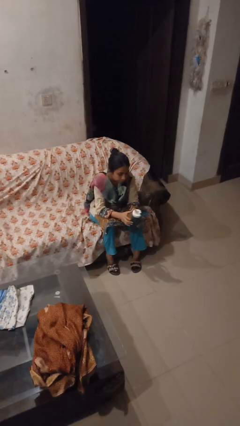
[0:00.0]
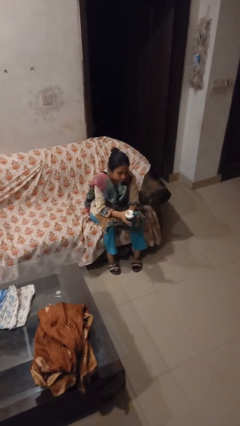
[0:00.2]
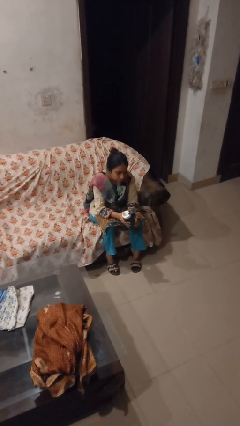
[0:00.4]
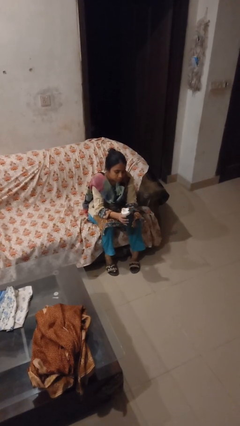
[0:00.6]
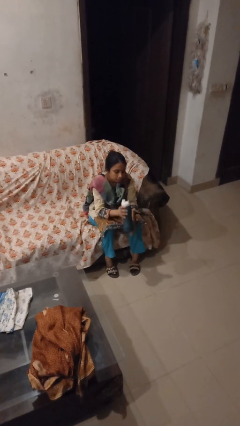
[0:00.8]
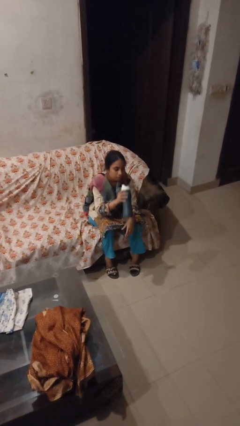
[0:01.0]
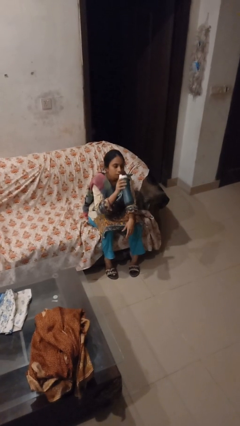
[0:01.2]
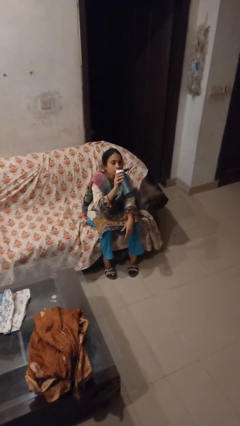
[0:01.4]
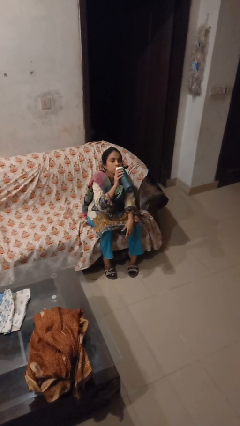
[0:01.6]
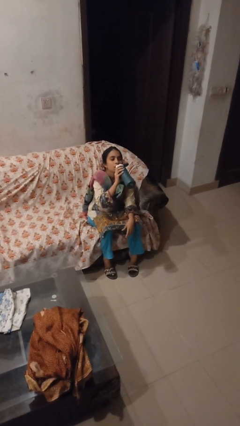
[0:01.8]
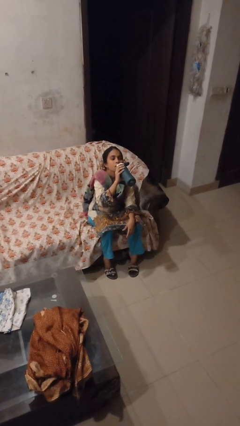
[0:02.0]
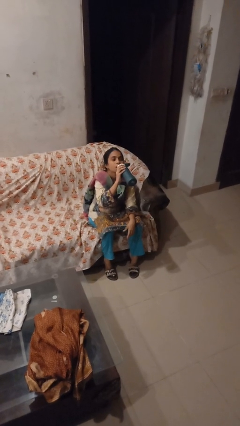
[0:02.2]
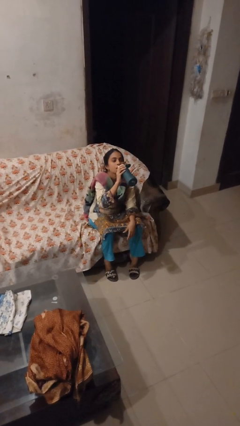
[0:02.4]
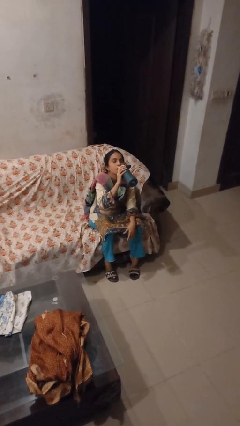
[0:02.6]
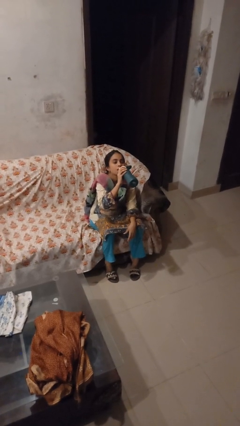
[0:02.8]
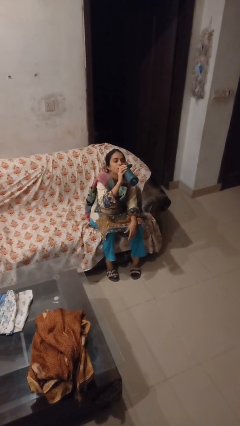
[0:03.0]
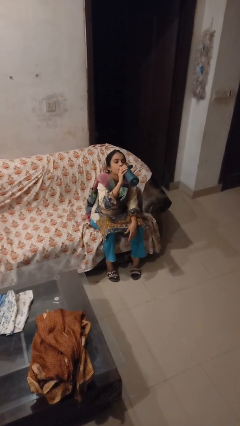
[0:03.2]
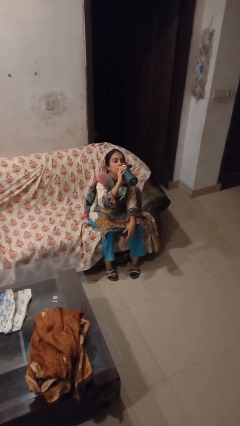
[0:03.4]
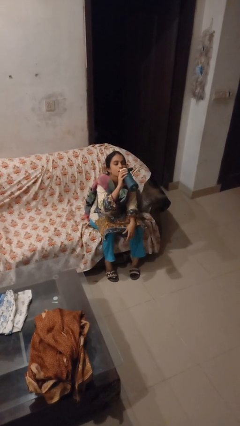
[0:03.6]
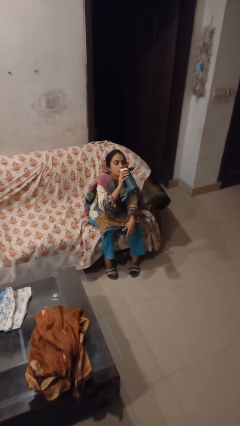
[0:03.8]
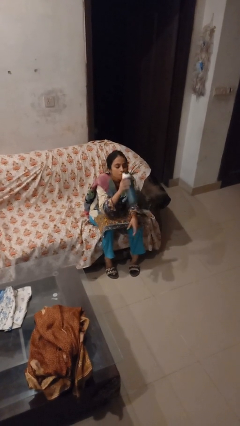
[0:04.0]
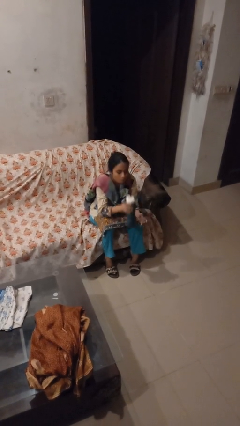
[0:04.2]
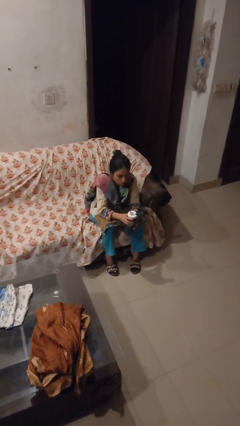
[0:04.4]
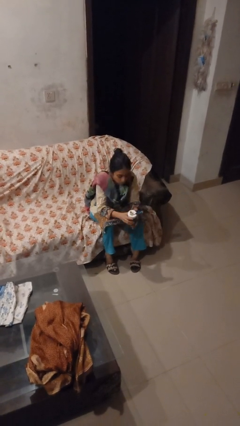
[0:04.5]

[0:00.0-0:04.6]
person drinks from bottle

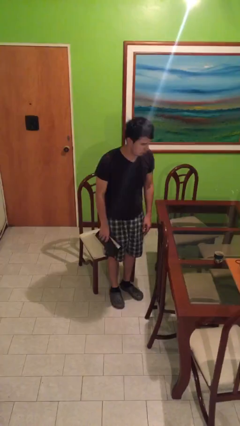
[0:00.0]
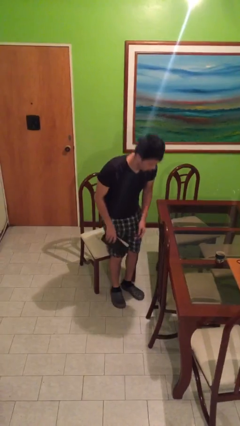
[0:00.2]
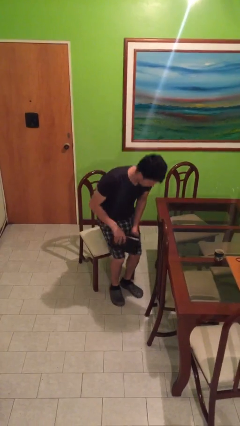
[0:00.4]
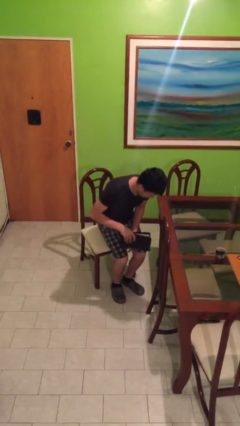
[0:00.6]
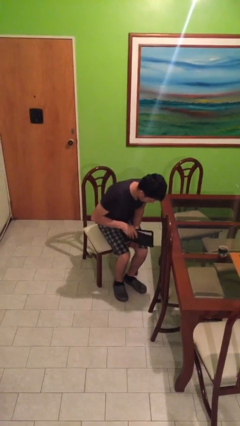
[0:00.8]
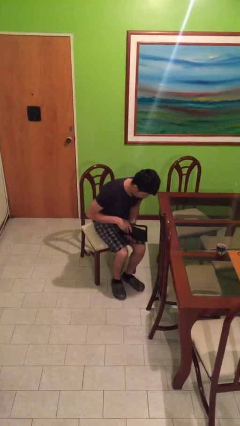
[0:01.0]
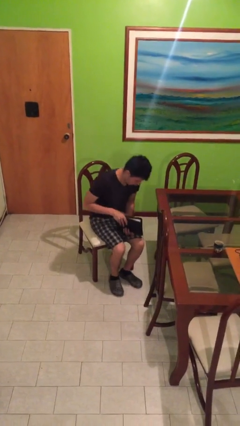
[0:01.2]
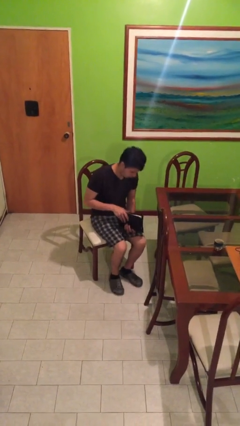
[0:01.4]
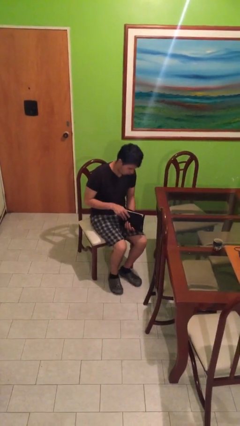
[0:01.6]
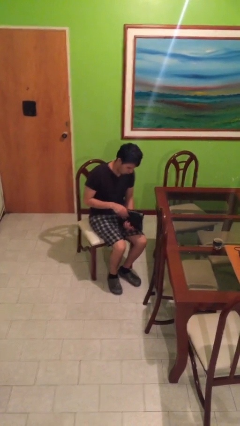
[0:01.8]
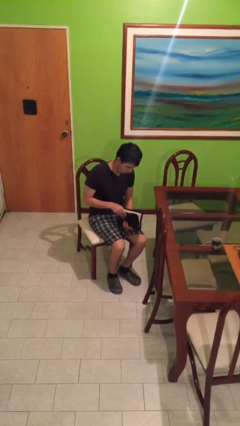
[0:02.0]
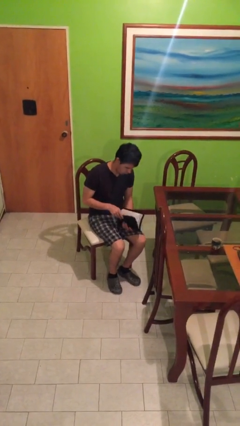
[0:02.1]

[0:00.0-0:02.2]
person sits down

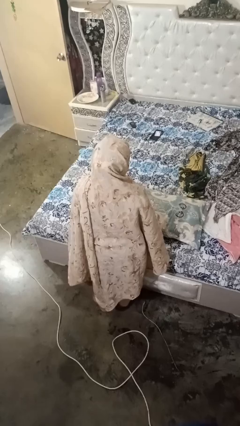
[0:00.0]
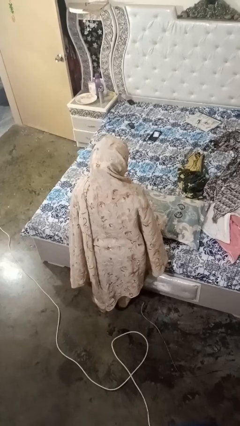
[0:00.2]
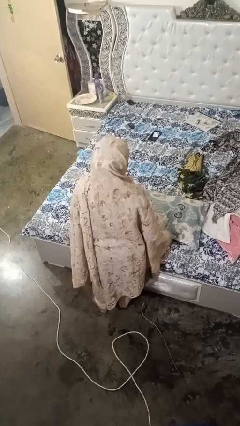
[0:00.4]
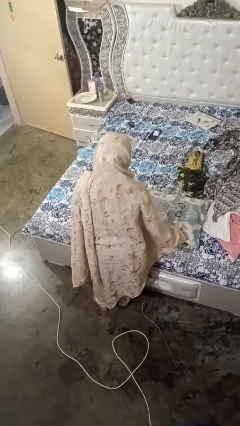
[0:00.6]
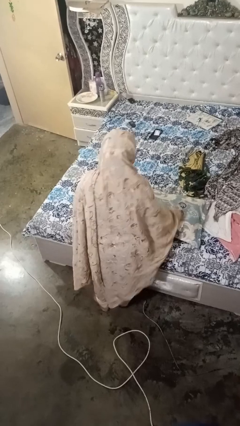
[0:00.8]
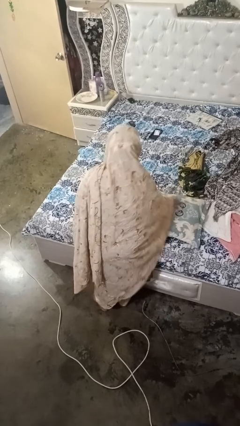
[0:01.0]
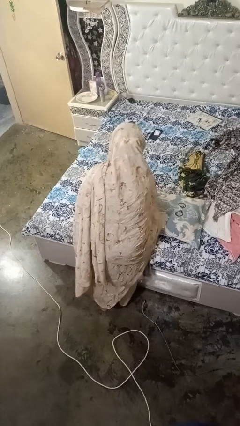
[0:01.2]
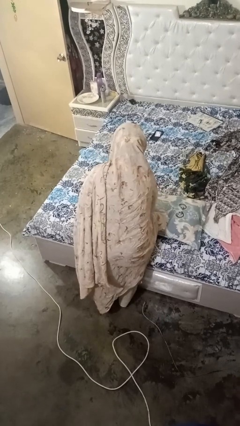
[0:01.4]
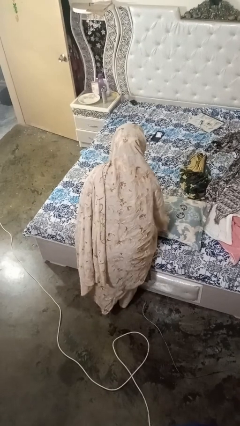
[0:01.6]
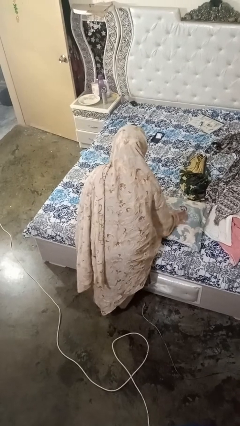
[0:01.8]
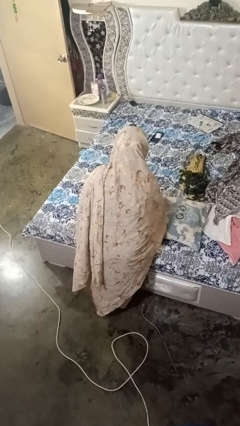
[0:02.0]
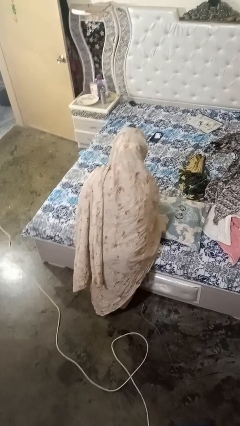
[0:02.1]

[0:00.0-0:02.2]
person waves hand over object

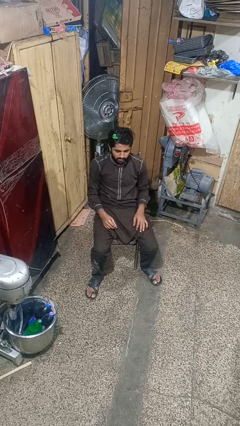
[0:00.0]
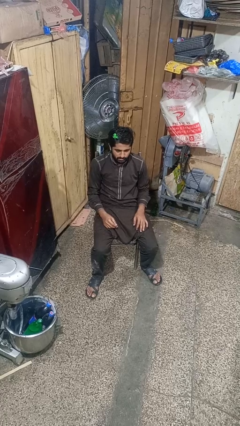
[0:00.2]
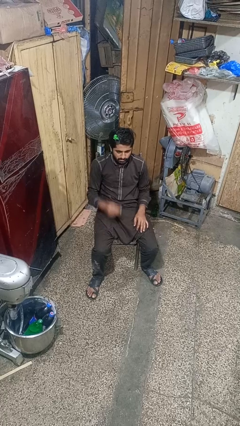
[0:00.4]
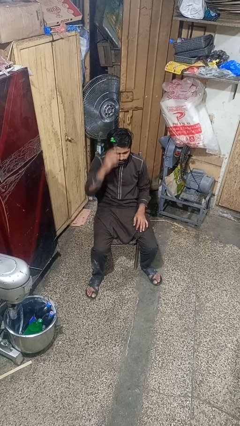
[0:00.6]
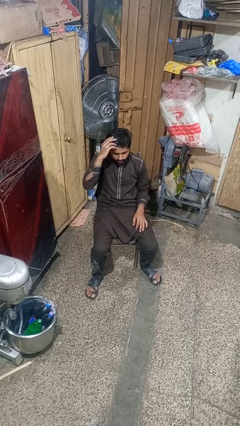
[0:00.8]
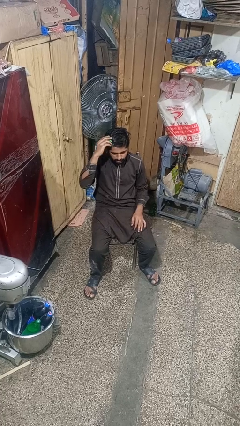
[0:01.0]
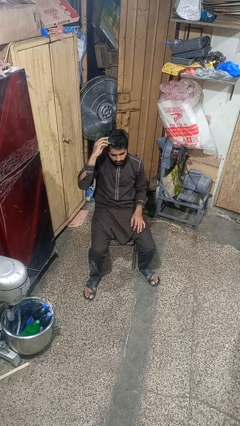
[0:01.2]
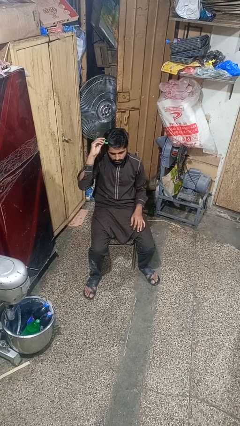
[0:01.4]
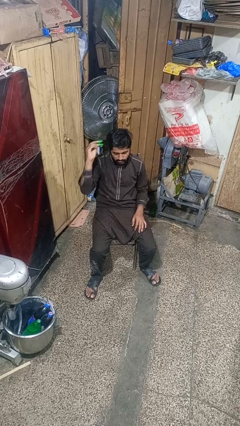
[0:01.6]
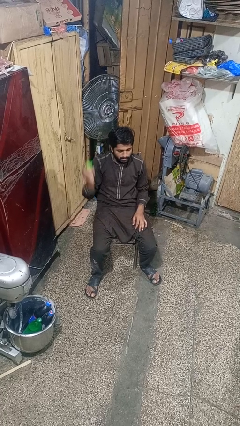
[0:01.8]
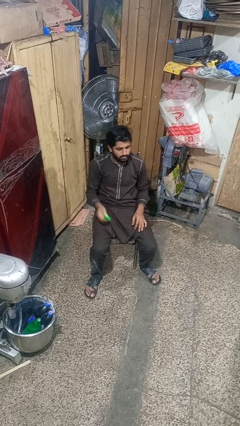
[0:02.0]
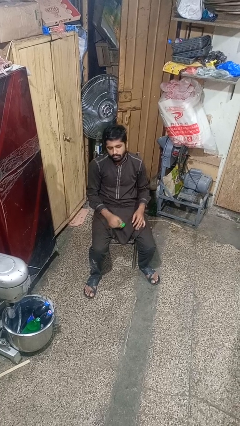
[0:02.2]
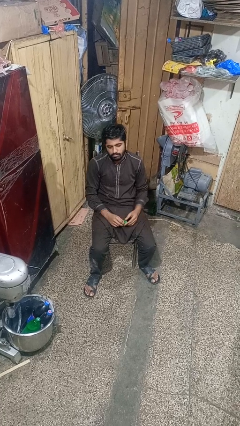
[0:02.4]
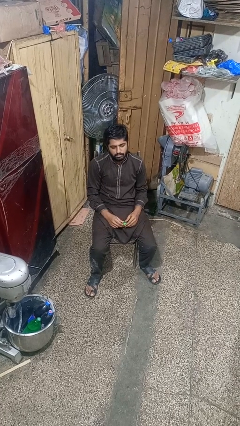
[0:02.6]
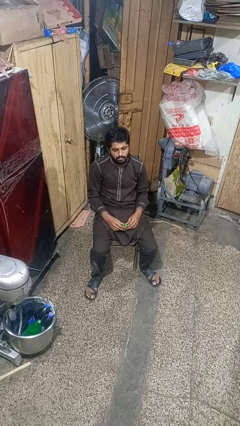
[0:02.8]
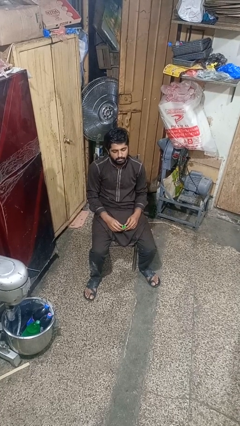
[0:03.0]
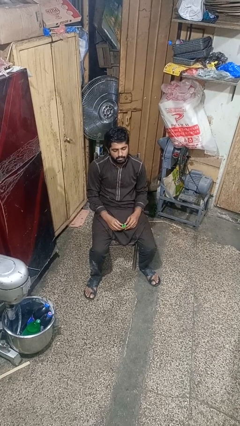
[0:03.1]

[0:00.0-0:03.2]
person takes off hairtie

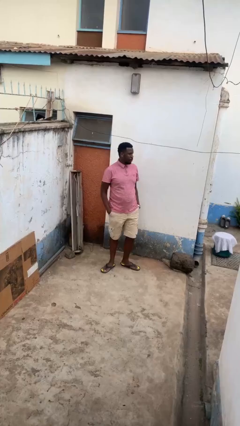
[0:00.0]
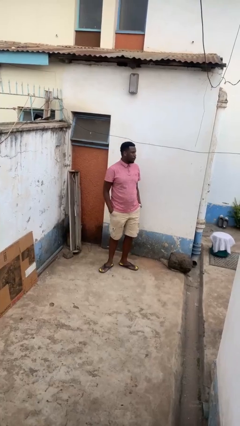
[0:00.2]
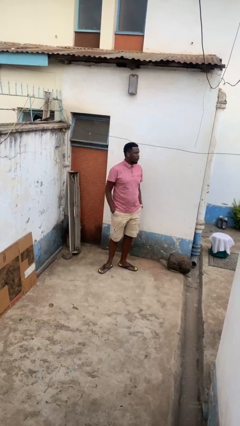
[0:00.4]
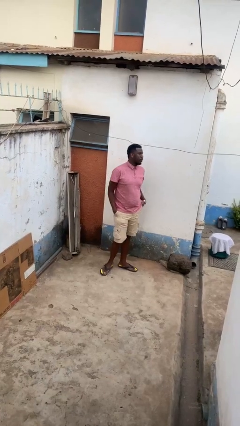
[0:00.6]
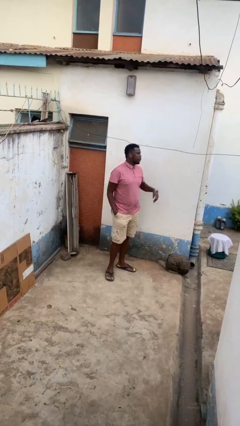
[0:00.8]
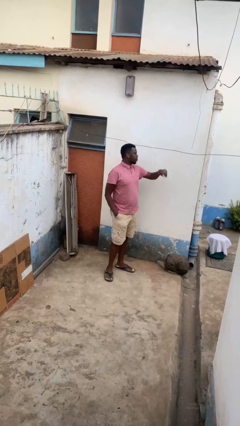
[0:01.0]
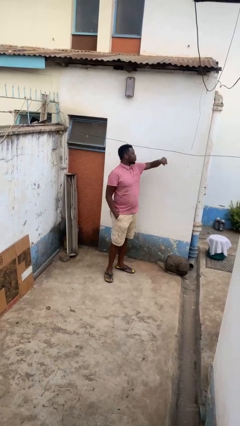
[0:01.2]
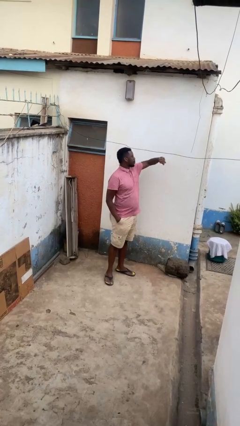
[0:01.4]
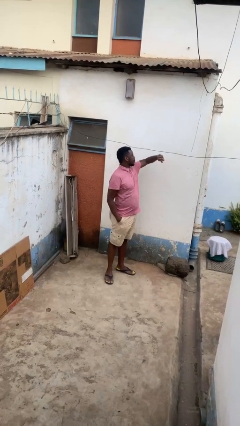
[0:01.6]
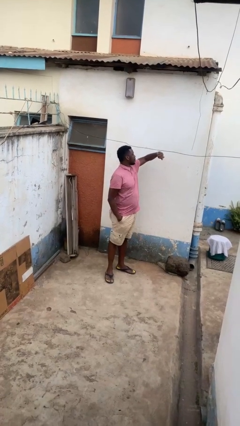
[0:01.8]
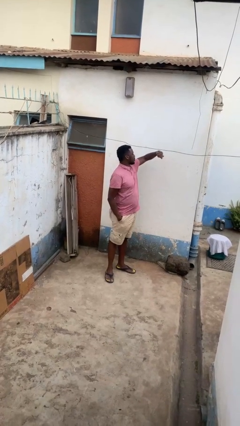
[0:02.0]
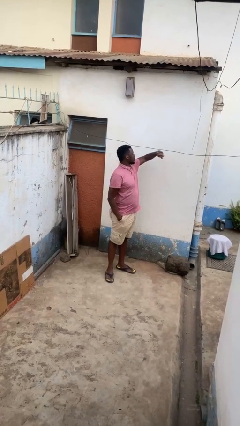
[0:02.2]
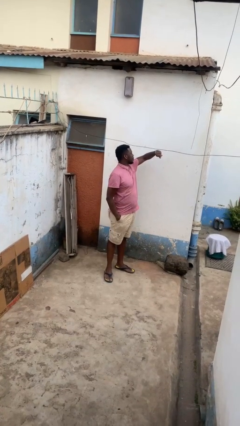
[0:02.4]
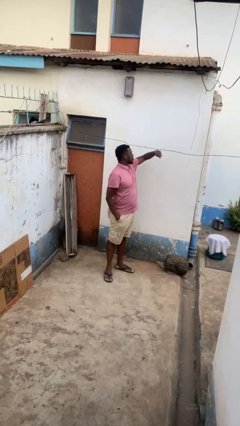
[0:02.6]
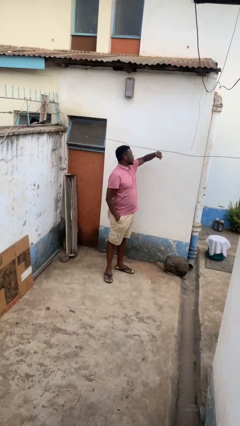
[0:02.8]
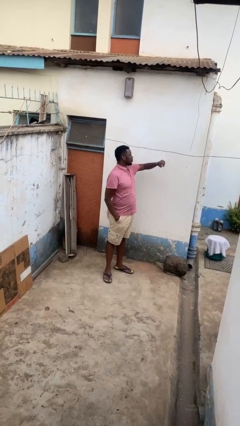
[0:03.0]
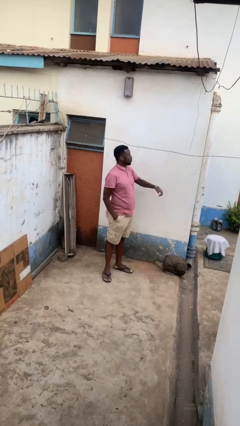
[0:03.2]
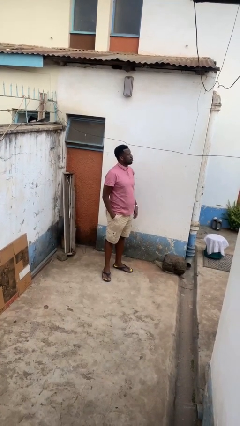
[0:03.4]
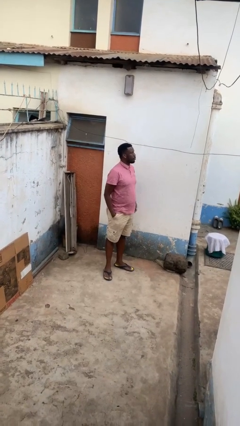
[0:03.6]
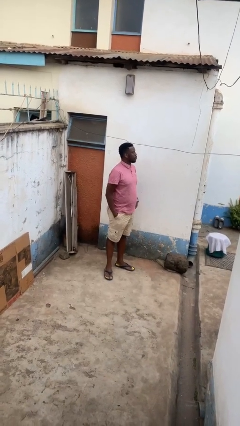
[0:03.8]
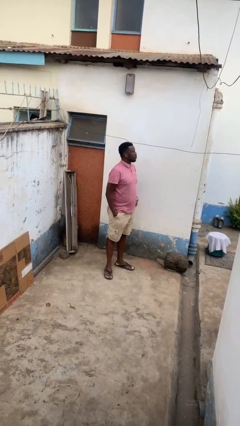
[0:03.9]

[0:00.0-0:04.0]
person looks at wristwatch

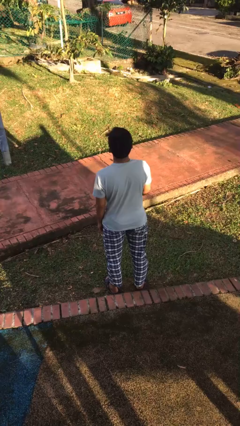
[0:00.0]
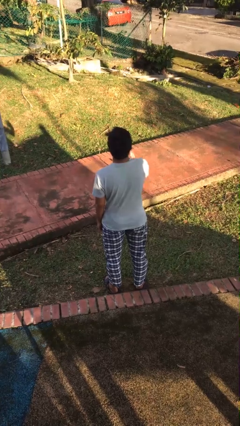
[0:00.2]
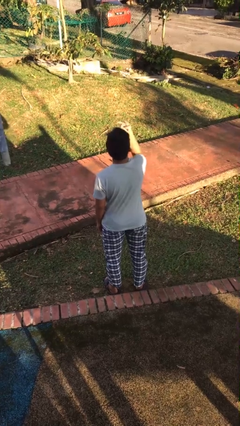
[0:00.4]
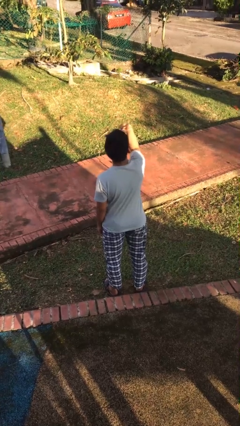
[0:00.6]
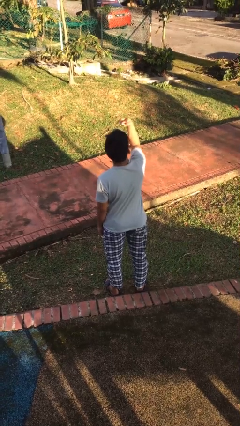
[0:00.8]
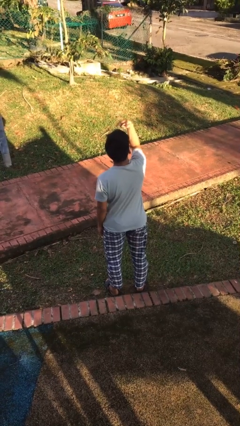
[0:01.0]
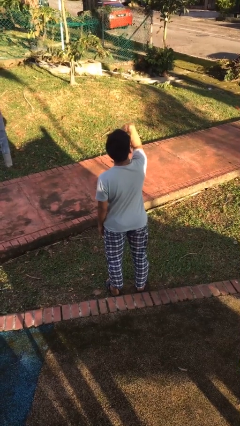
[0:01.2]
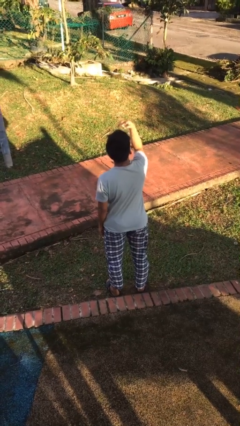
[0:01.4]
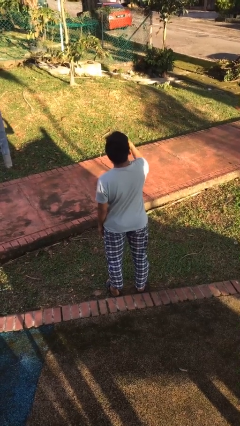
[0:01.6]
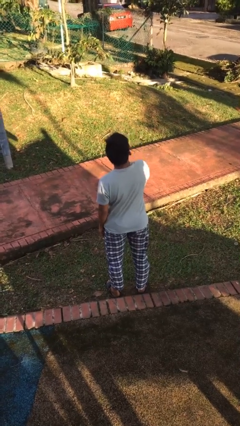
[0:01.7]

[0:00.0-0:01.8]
person gestures watch closely
